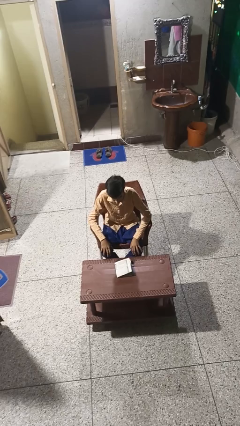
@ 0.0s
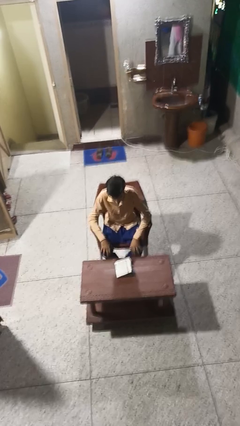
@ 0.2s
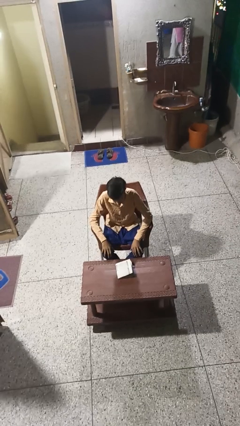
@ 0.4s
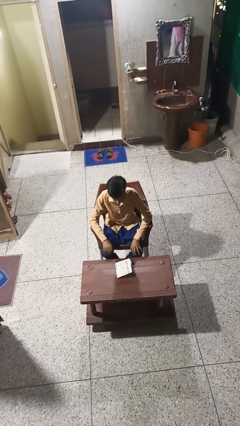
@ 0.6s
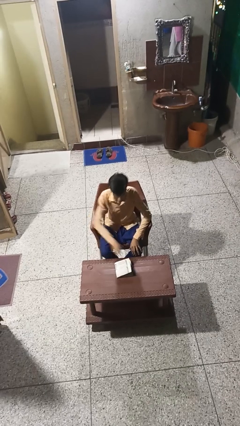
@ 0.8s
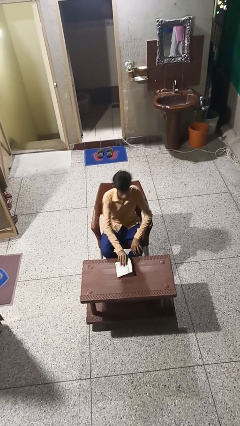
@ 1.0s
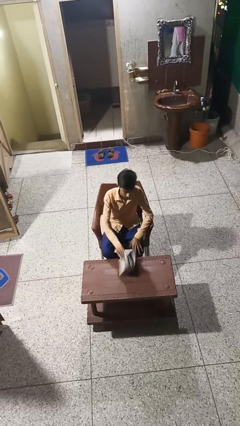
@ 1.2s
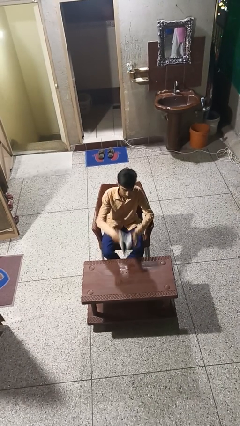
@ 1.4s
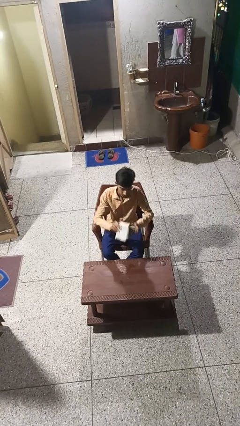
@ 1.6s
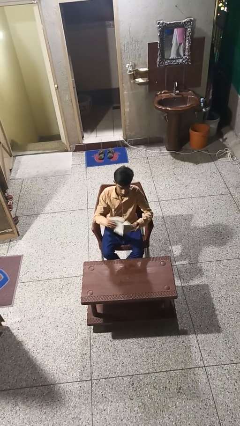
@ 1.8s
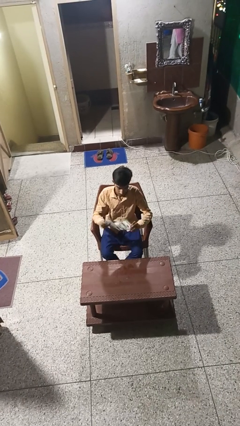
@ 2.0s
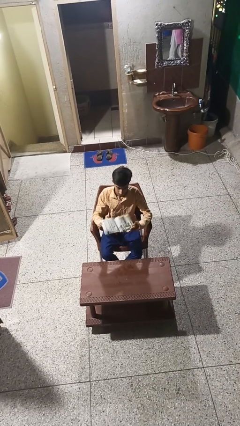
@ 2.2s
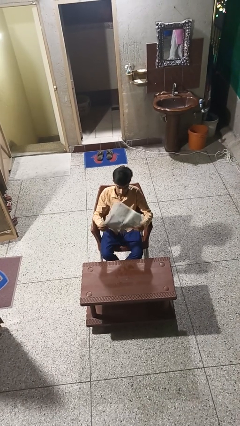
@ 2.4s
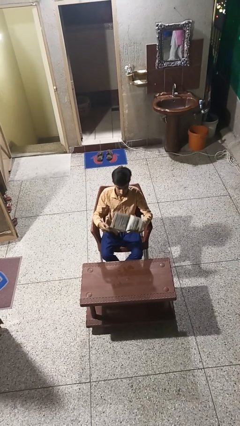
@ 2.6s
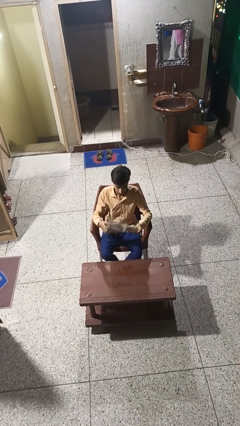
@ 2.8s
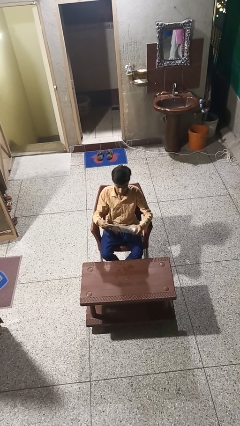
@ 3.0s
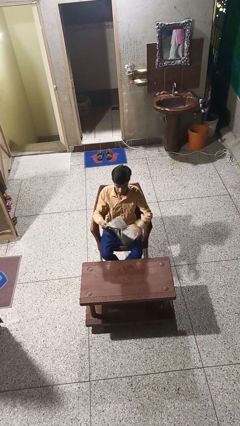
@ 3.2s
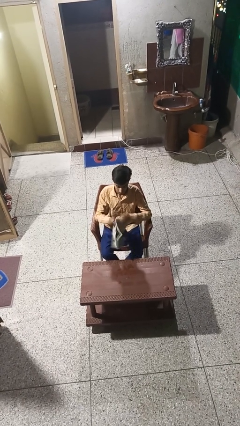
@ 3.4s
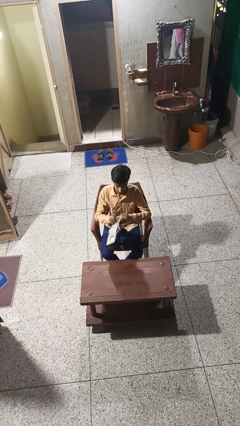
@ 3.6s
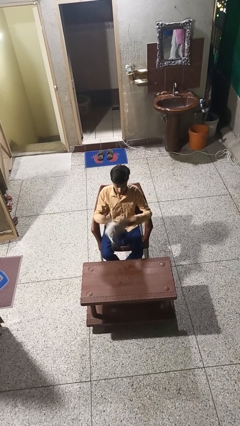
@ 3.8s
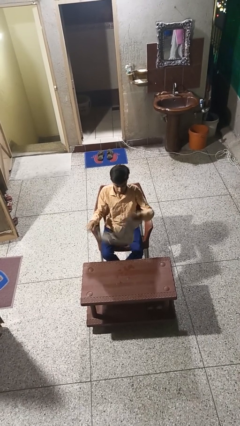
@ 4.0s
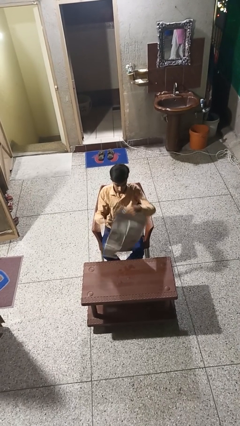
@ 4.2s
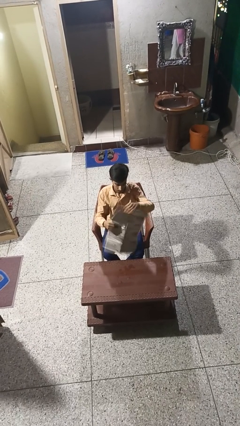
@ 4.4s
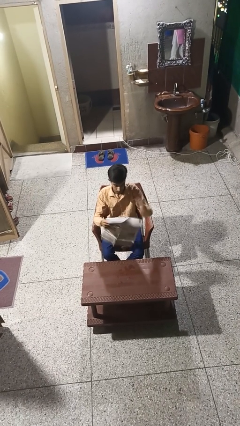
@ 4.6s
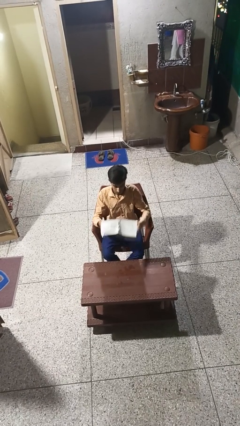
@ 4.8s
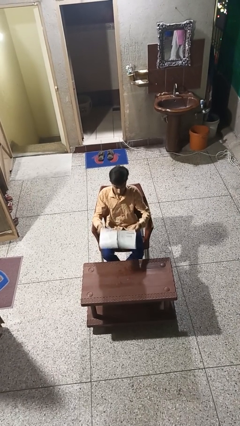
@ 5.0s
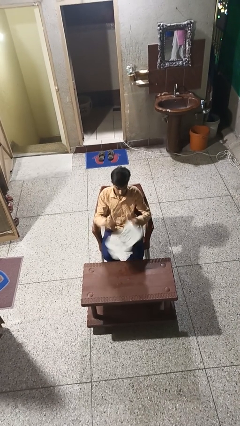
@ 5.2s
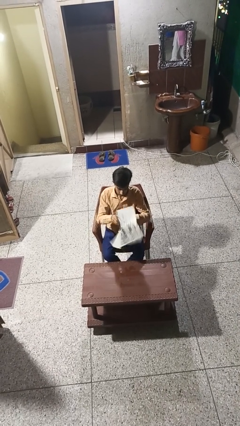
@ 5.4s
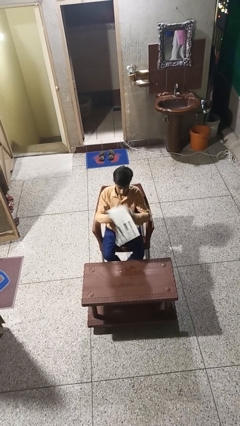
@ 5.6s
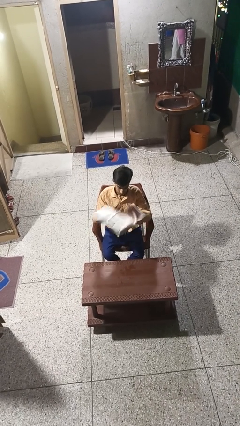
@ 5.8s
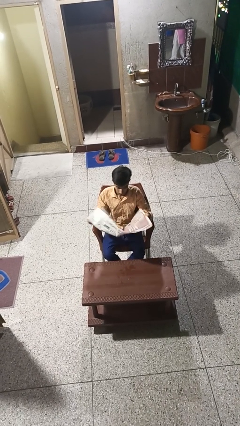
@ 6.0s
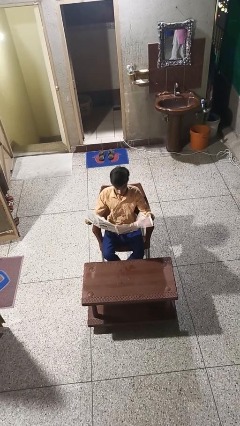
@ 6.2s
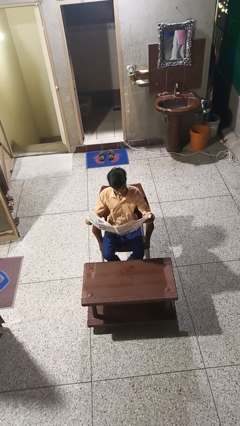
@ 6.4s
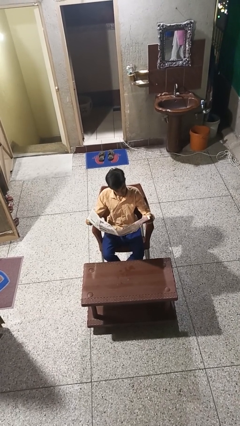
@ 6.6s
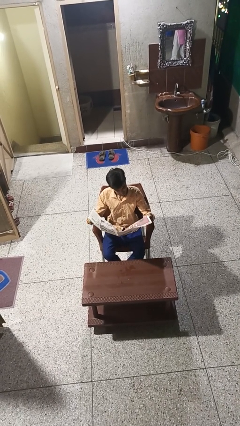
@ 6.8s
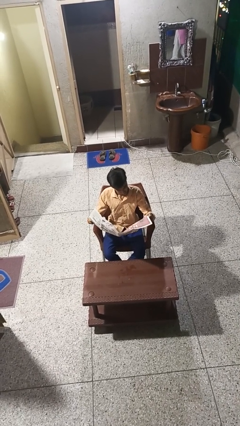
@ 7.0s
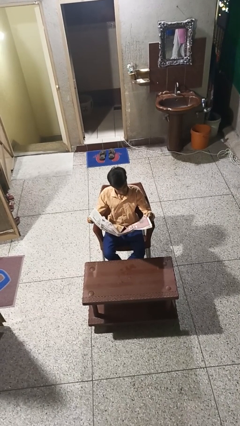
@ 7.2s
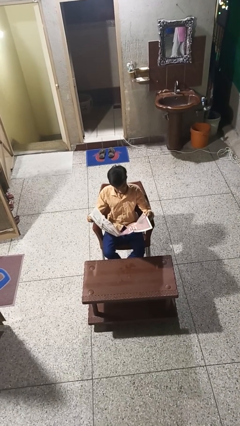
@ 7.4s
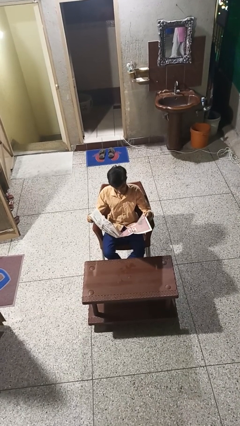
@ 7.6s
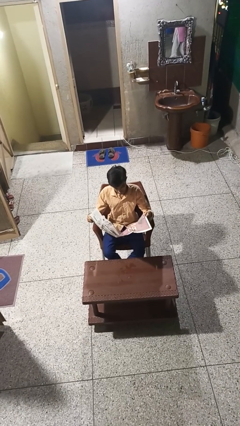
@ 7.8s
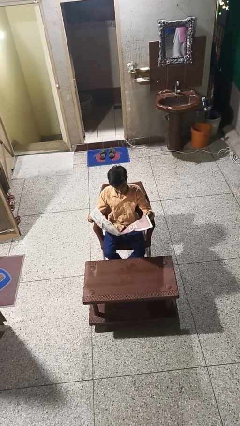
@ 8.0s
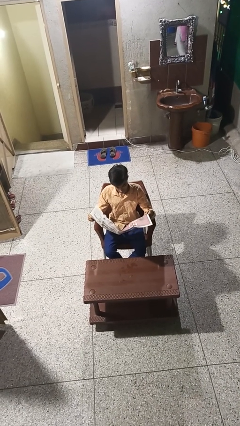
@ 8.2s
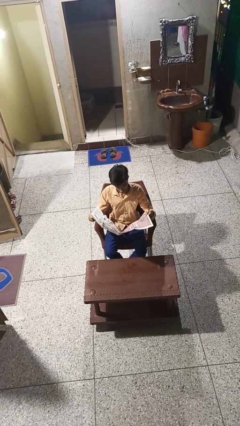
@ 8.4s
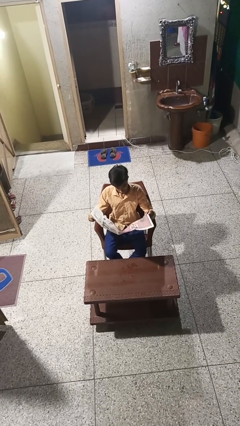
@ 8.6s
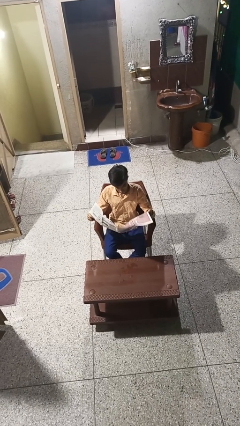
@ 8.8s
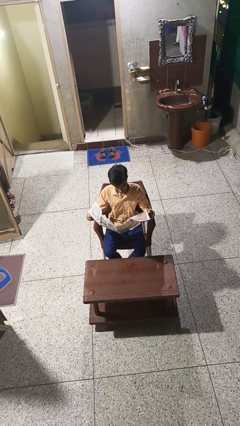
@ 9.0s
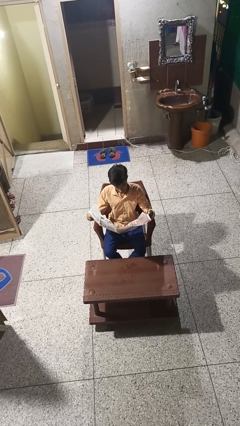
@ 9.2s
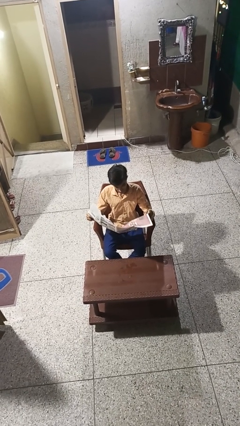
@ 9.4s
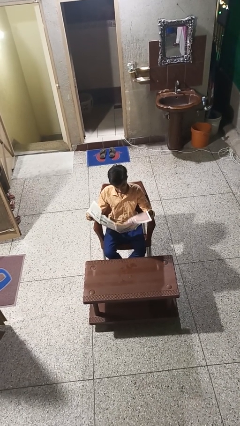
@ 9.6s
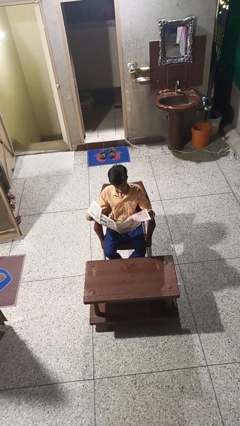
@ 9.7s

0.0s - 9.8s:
person reads newspaper

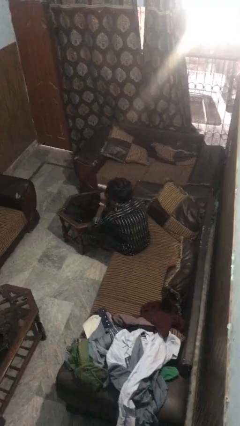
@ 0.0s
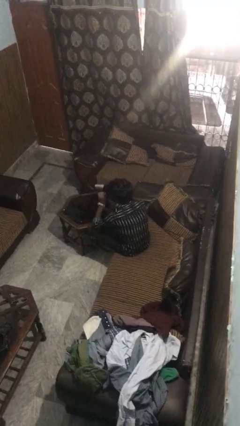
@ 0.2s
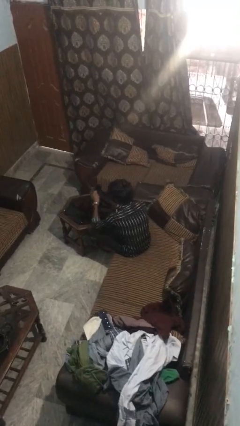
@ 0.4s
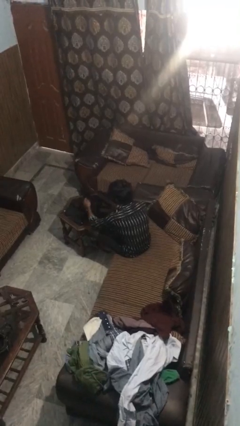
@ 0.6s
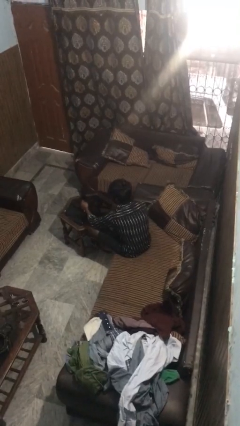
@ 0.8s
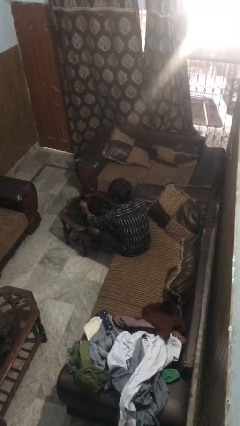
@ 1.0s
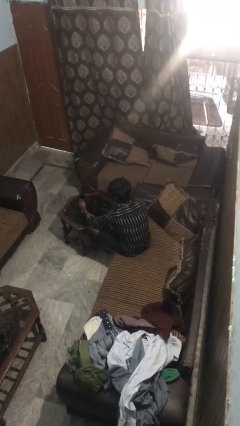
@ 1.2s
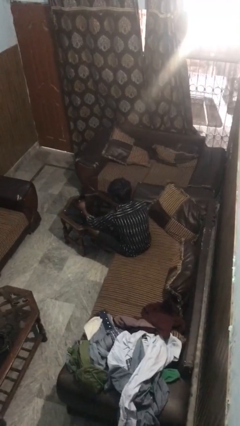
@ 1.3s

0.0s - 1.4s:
person puts down object on table

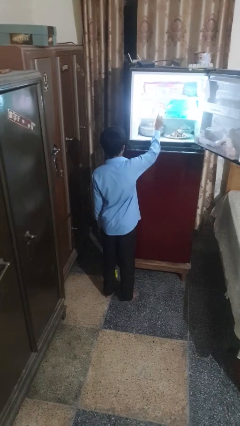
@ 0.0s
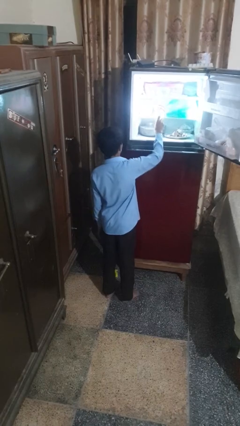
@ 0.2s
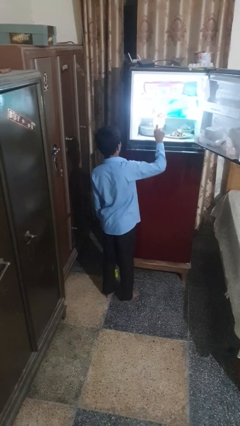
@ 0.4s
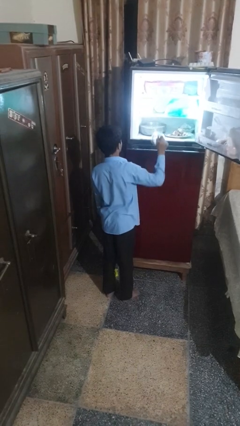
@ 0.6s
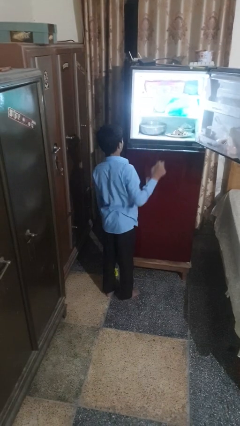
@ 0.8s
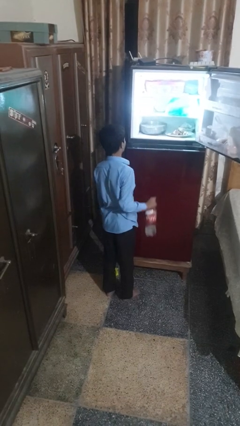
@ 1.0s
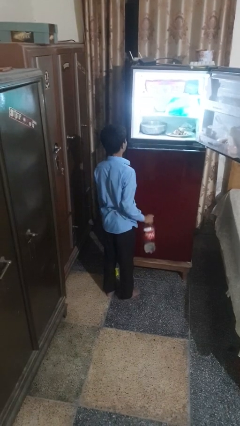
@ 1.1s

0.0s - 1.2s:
person takes object from refrigerator

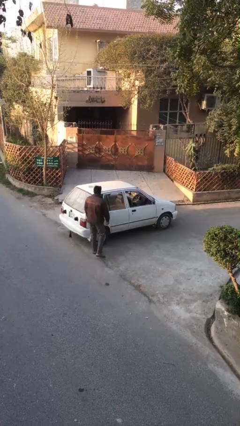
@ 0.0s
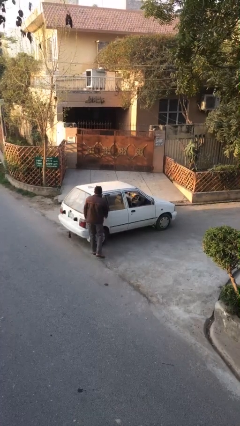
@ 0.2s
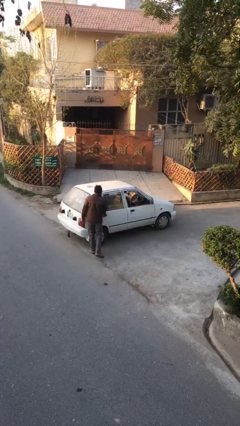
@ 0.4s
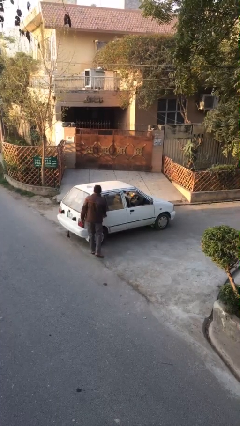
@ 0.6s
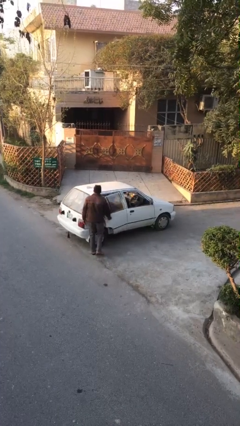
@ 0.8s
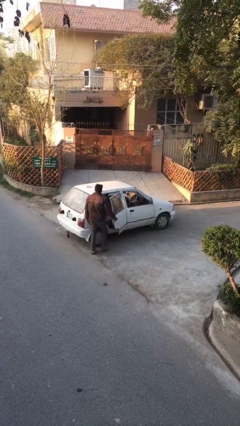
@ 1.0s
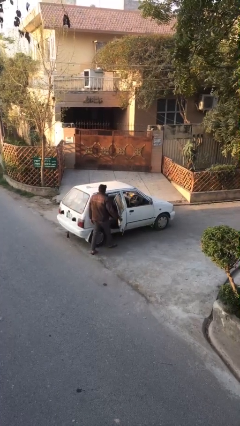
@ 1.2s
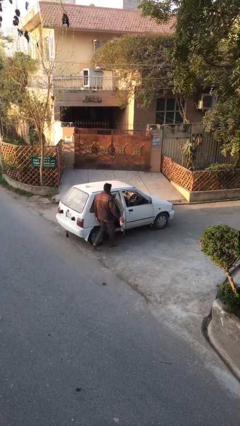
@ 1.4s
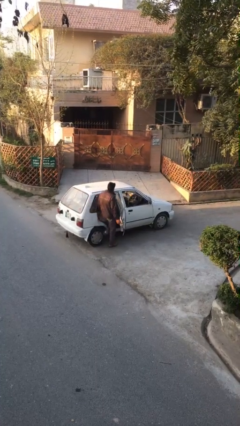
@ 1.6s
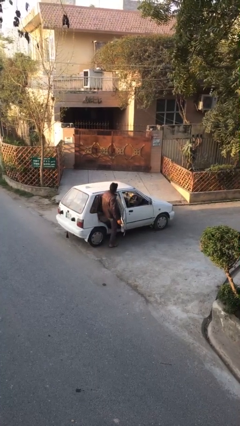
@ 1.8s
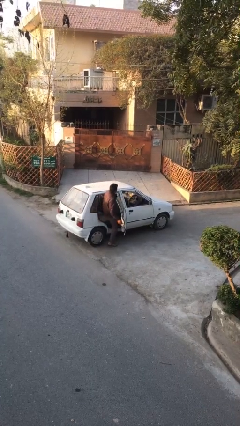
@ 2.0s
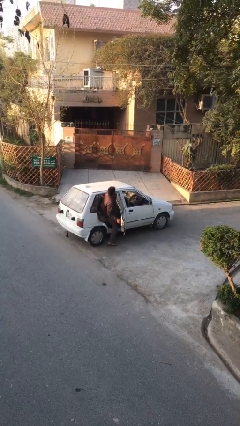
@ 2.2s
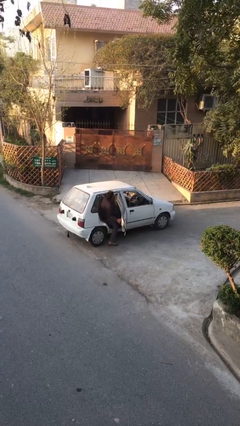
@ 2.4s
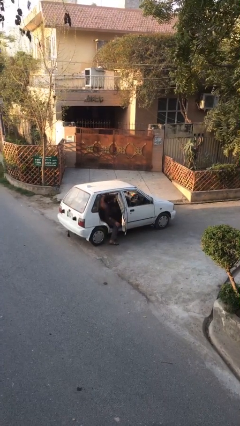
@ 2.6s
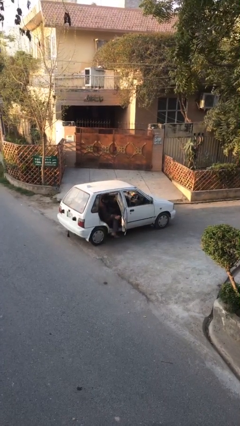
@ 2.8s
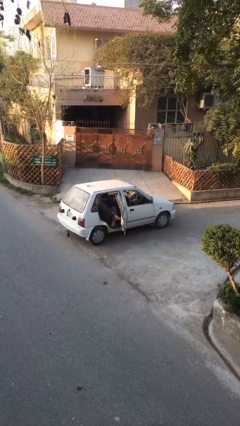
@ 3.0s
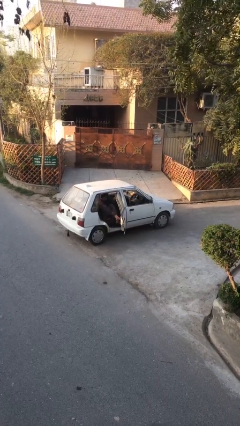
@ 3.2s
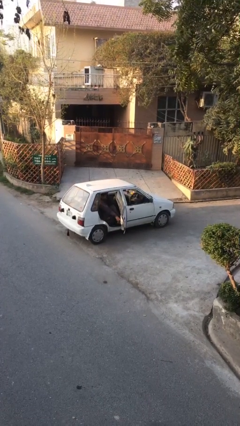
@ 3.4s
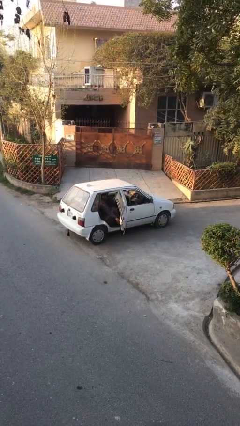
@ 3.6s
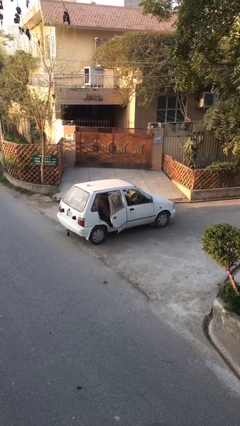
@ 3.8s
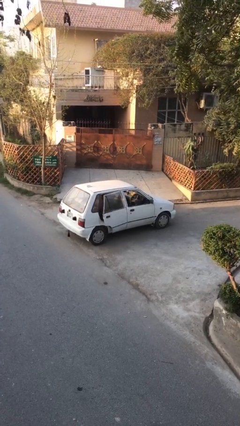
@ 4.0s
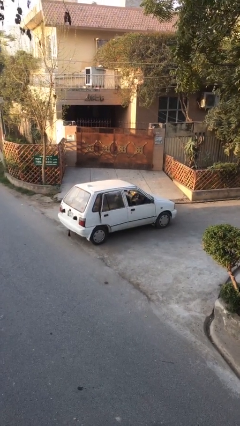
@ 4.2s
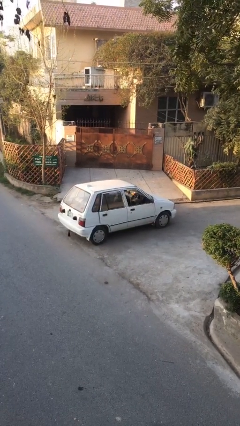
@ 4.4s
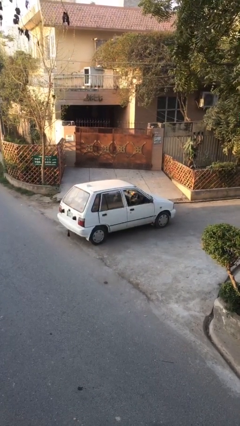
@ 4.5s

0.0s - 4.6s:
car picks up person

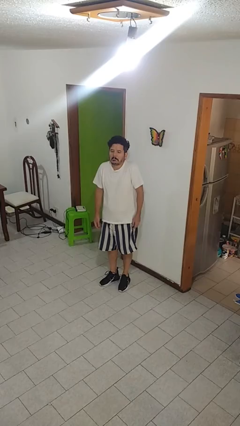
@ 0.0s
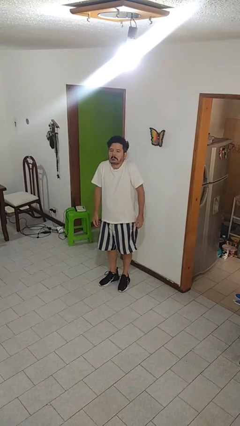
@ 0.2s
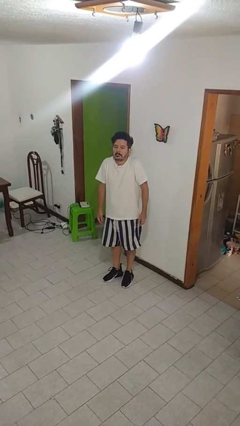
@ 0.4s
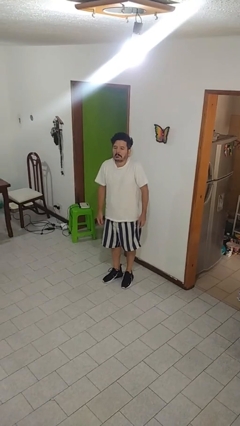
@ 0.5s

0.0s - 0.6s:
person shrugs

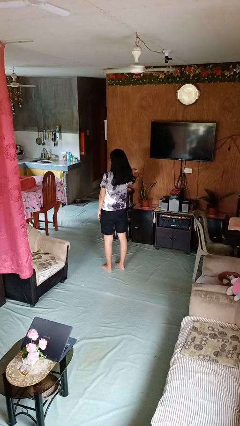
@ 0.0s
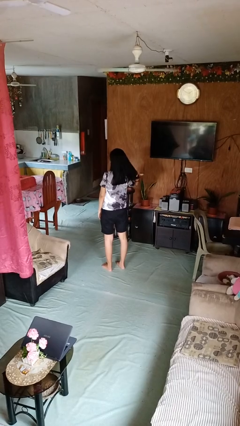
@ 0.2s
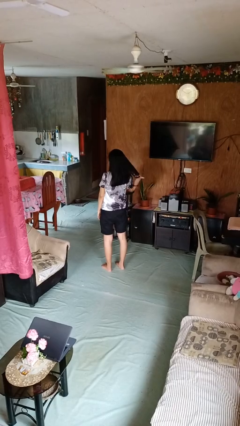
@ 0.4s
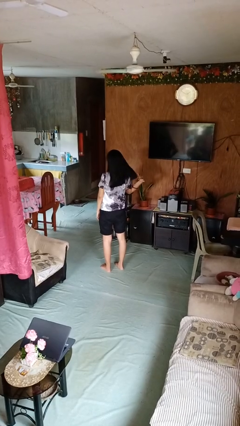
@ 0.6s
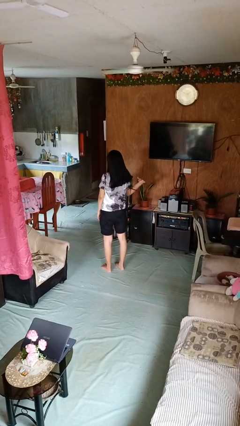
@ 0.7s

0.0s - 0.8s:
person strokes hair
